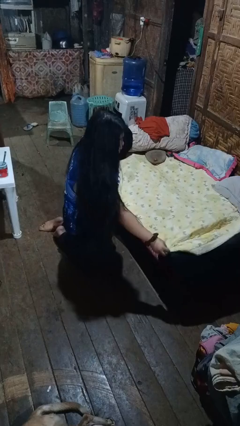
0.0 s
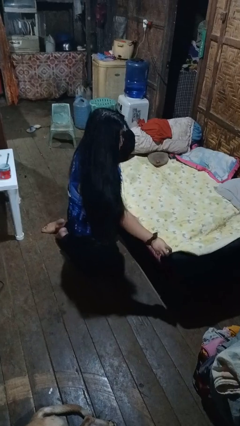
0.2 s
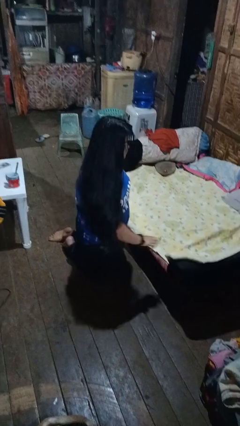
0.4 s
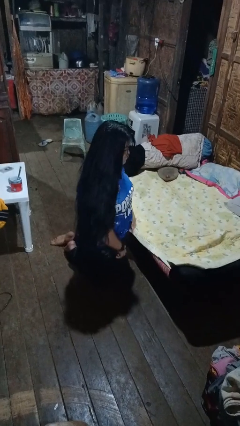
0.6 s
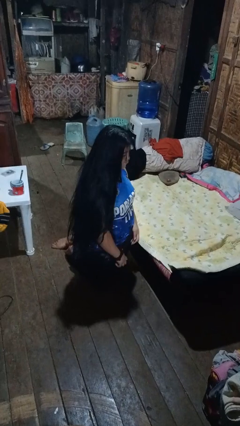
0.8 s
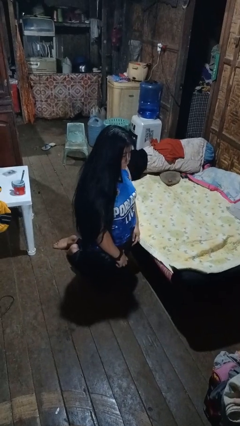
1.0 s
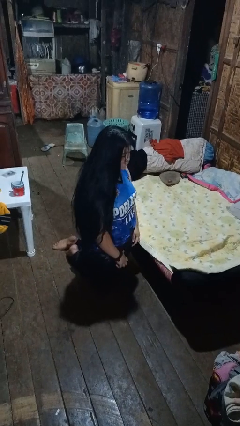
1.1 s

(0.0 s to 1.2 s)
person searches under bed

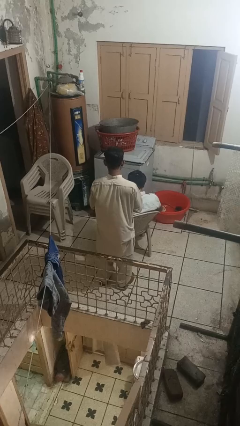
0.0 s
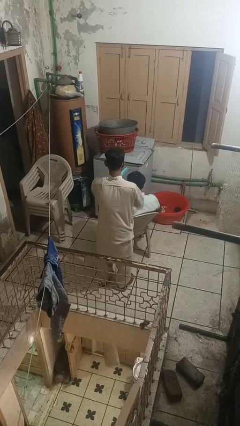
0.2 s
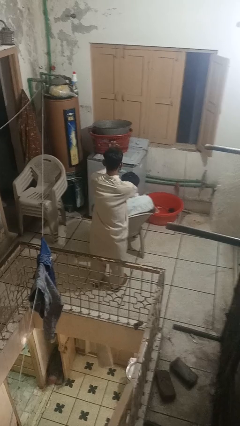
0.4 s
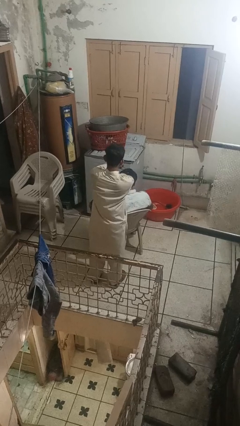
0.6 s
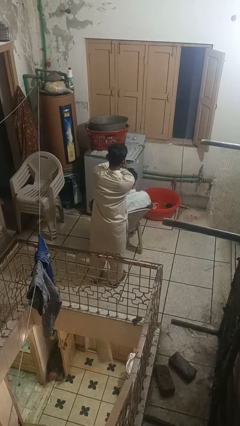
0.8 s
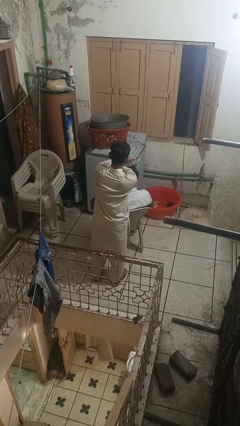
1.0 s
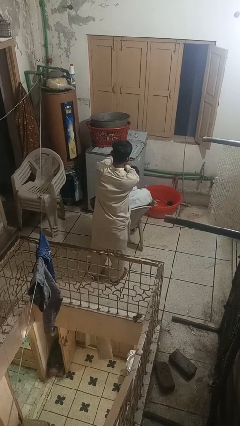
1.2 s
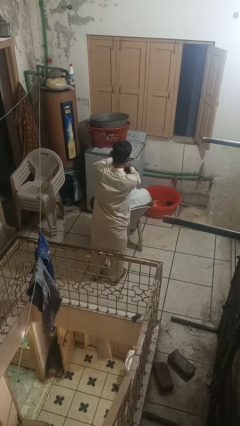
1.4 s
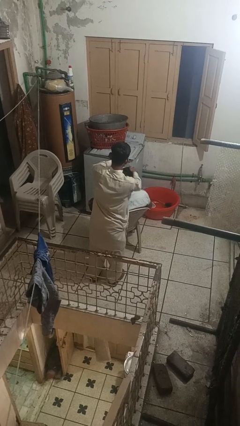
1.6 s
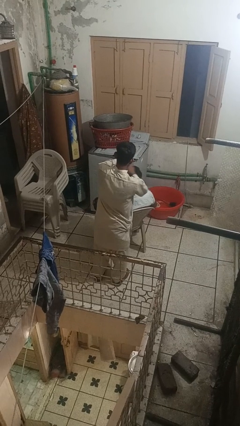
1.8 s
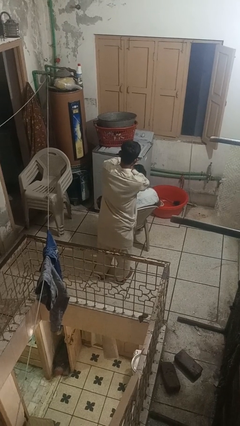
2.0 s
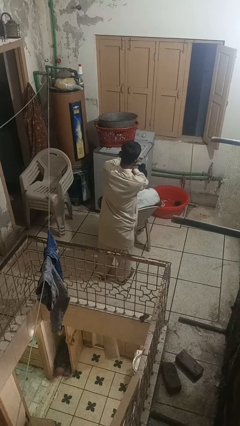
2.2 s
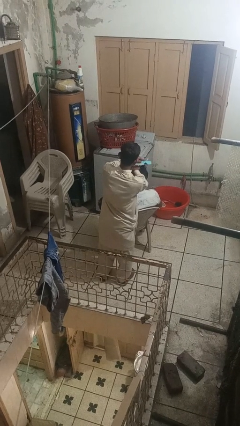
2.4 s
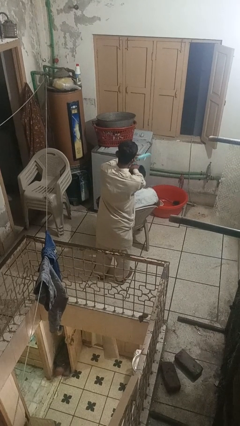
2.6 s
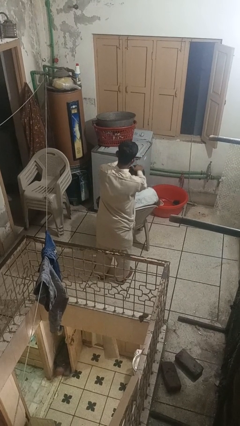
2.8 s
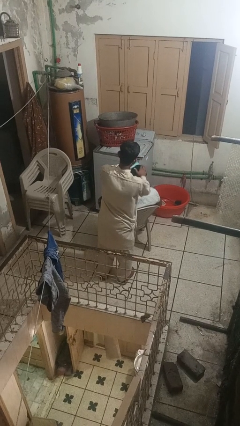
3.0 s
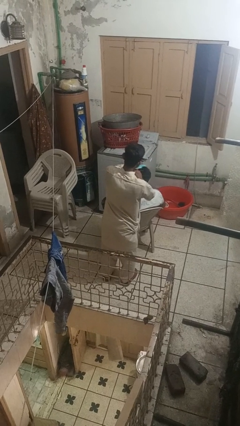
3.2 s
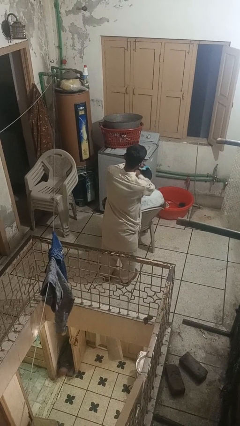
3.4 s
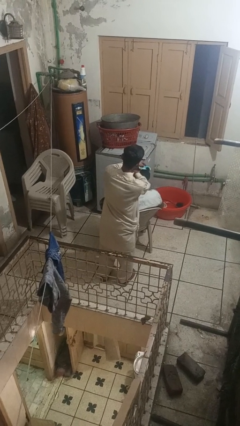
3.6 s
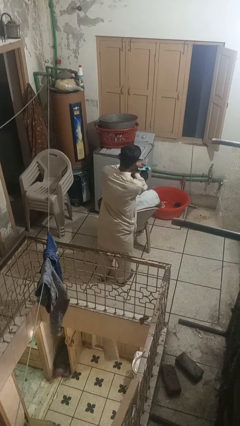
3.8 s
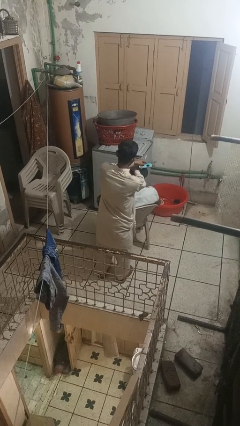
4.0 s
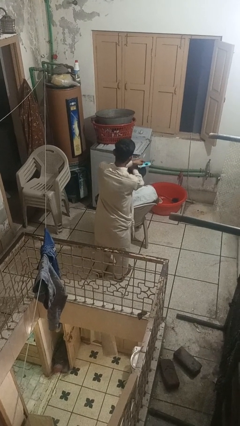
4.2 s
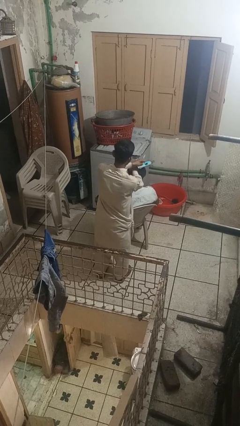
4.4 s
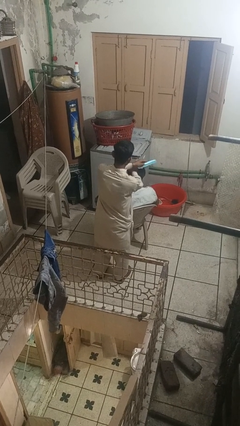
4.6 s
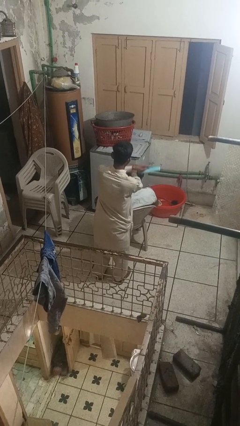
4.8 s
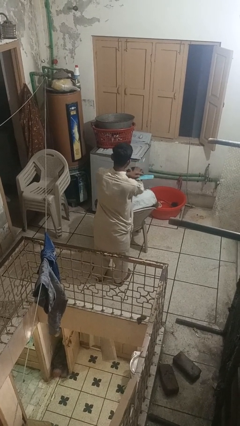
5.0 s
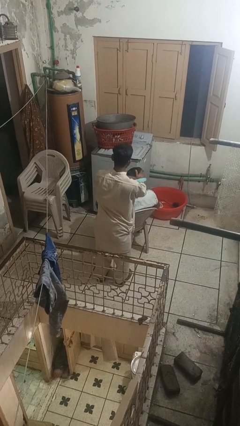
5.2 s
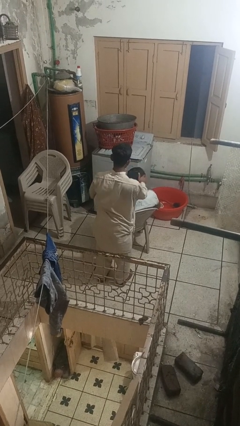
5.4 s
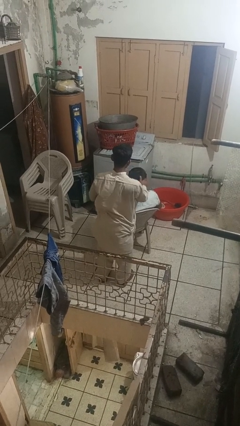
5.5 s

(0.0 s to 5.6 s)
person brushes hair of person

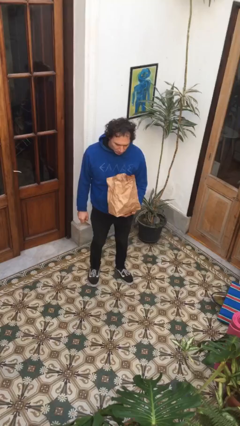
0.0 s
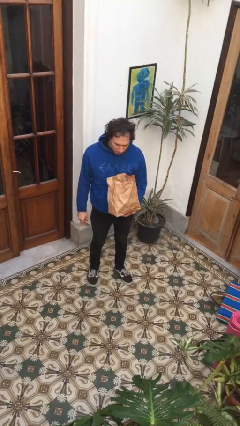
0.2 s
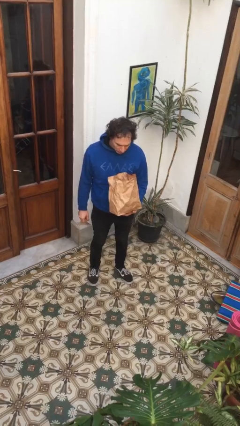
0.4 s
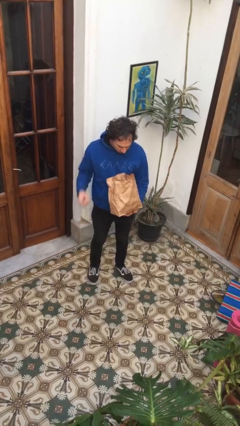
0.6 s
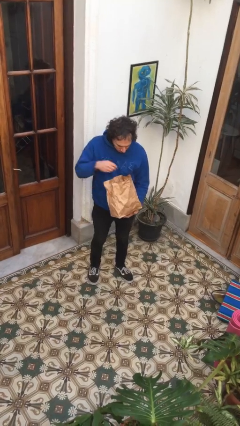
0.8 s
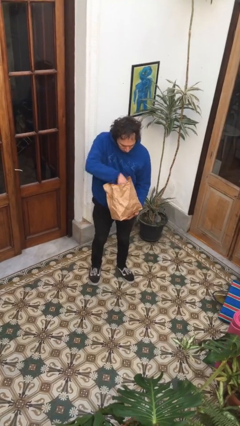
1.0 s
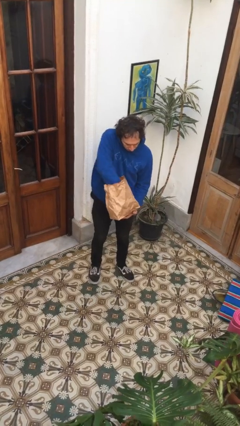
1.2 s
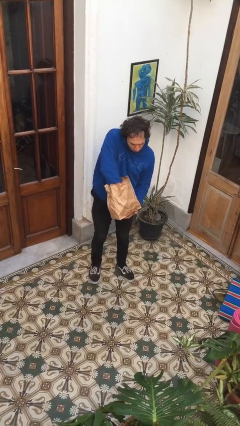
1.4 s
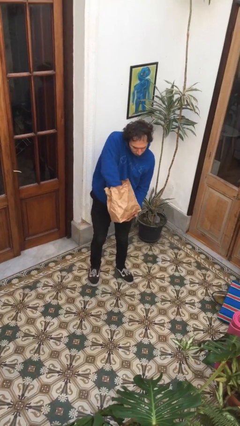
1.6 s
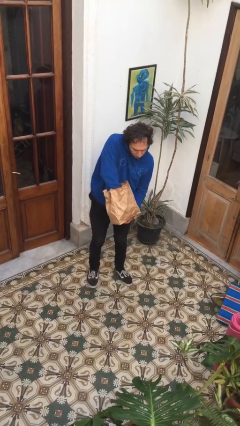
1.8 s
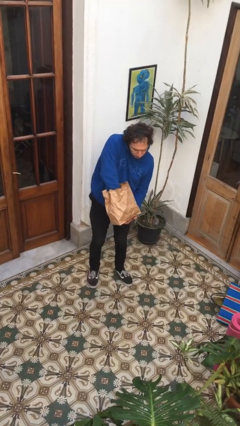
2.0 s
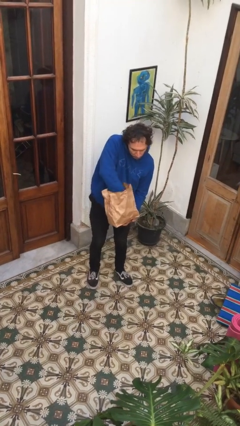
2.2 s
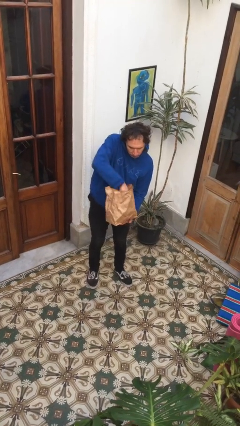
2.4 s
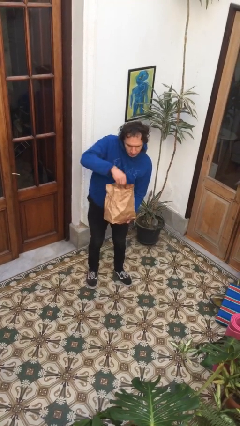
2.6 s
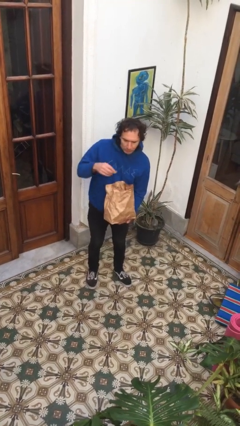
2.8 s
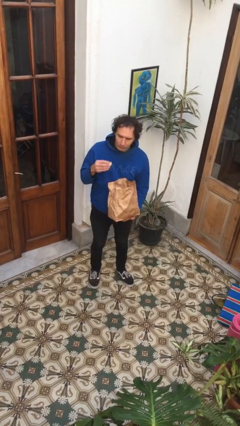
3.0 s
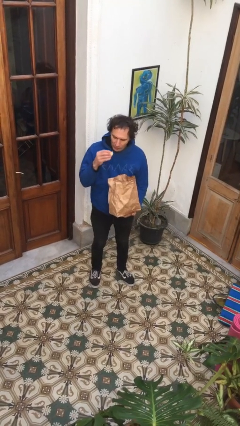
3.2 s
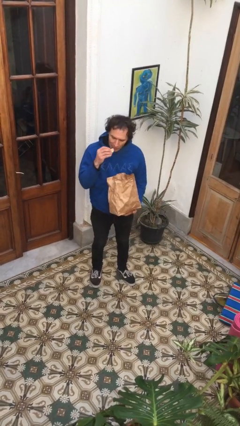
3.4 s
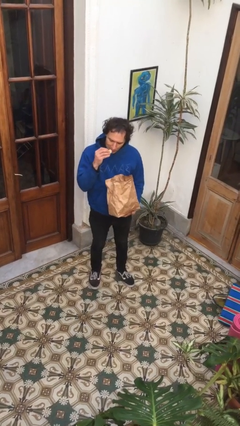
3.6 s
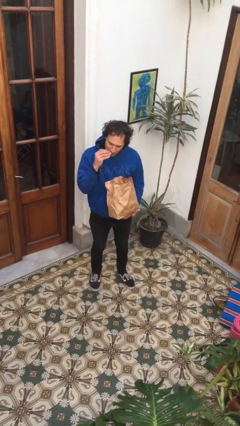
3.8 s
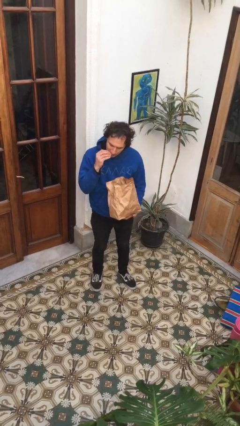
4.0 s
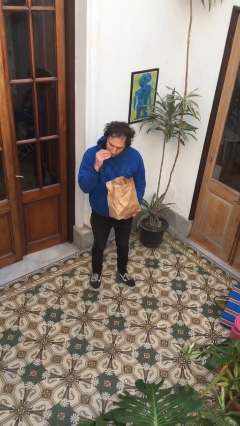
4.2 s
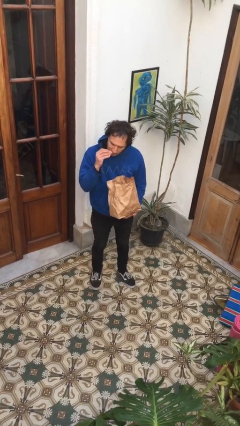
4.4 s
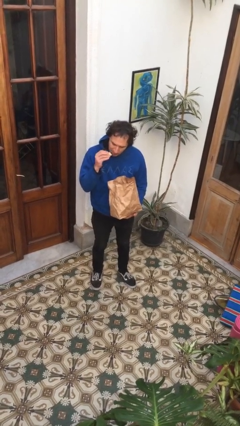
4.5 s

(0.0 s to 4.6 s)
person eats snack from bag

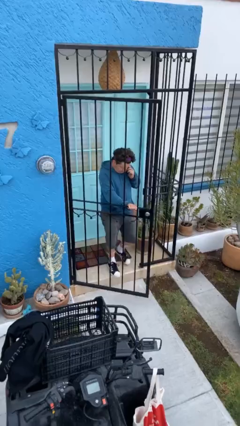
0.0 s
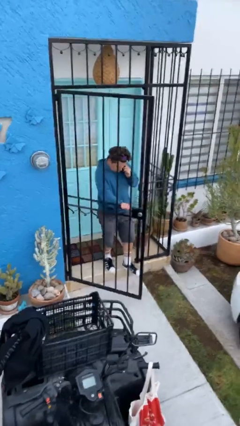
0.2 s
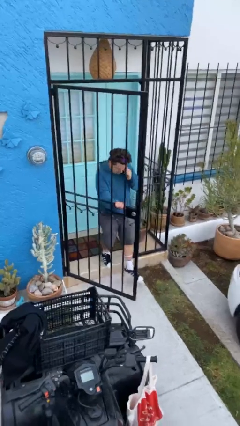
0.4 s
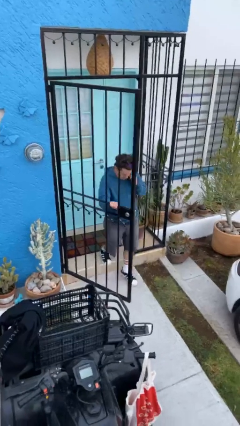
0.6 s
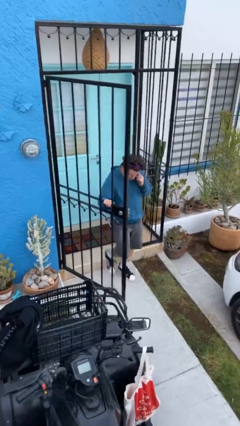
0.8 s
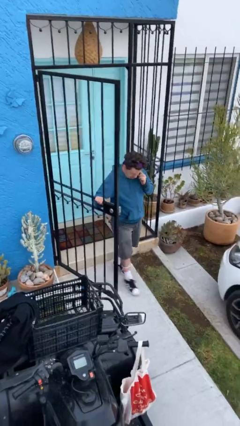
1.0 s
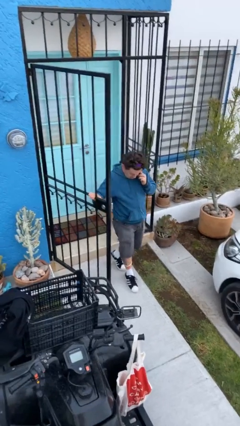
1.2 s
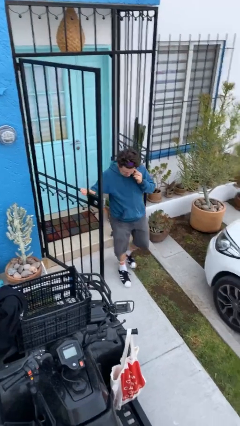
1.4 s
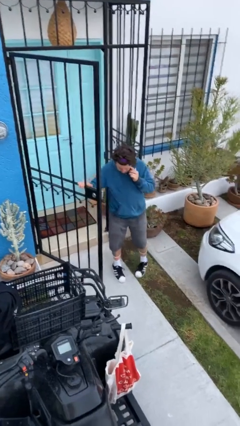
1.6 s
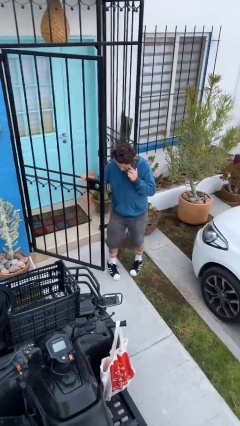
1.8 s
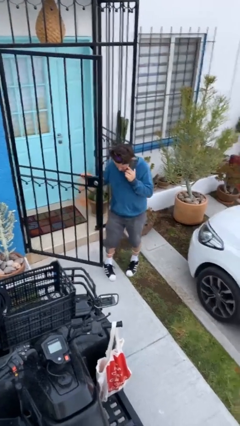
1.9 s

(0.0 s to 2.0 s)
person enters scene through structure

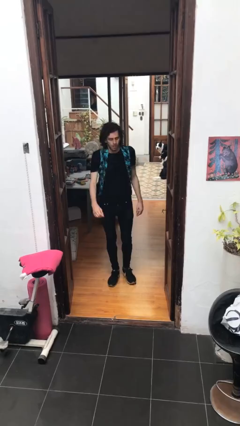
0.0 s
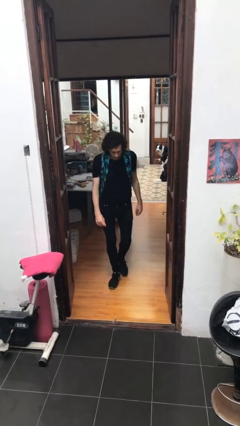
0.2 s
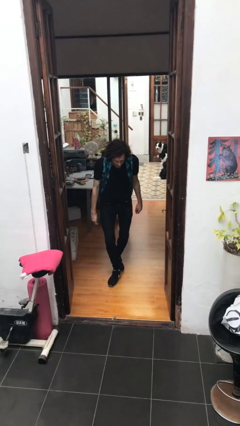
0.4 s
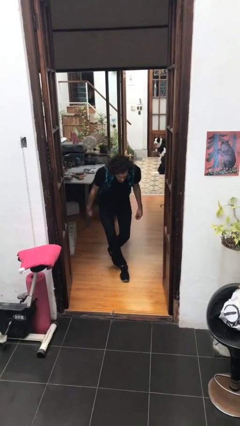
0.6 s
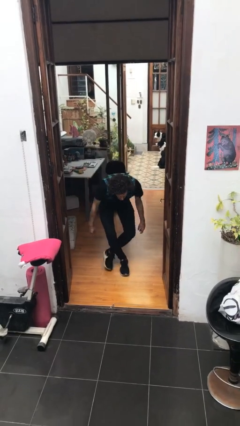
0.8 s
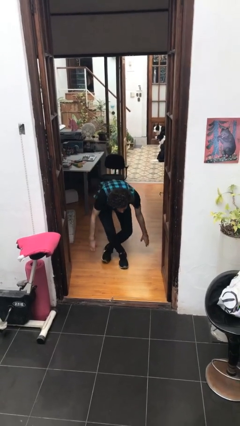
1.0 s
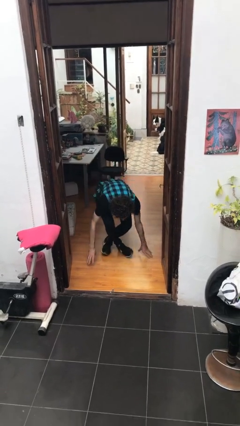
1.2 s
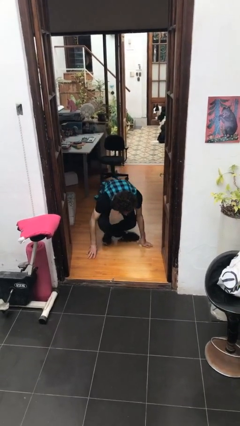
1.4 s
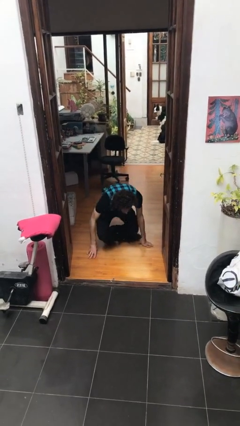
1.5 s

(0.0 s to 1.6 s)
person sits down

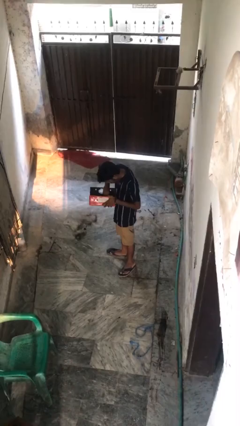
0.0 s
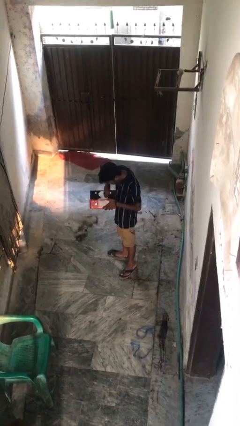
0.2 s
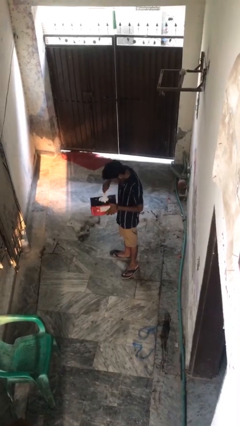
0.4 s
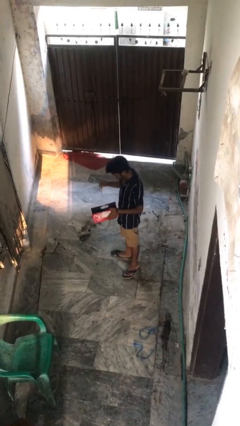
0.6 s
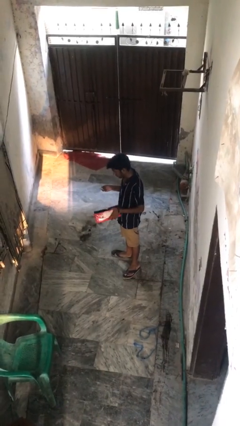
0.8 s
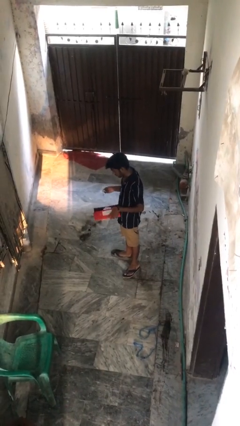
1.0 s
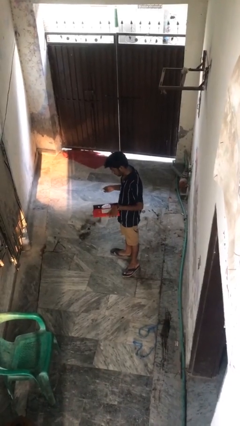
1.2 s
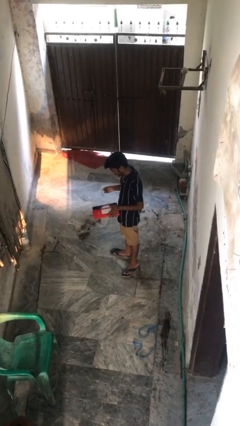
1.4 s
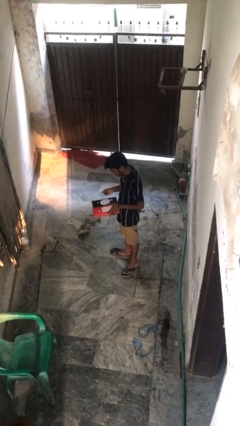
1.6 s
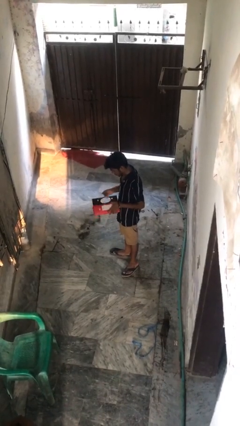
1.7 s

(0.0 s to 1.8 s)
person takes object from purse

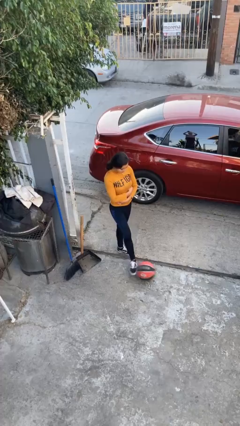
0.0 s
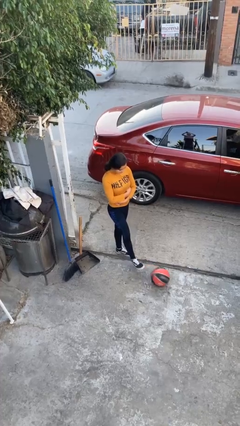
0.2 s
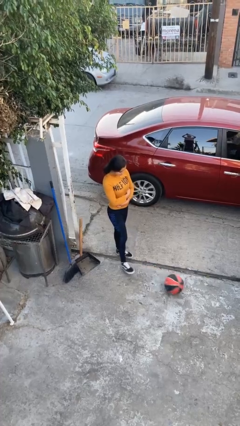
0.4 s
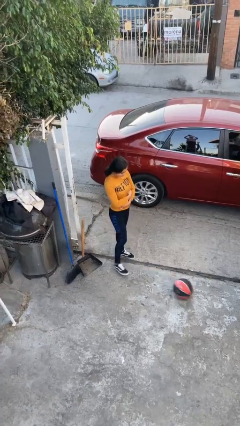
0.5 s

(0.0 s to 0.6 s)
person kicks object to person
